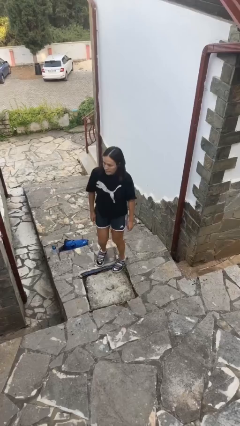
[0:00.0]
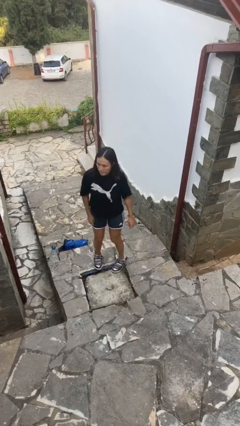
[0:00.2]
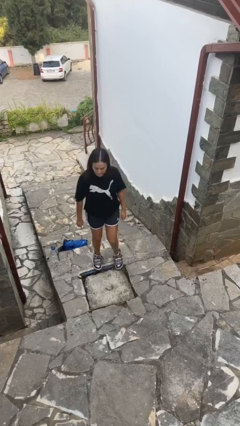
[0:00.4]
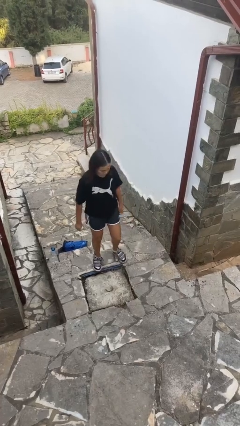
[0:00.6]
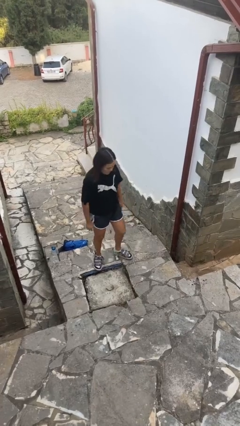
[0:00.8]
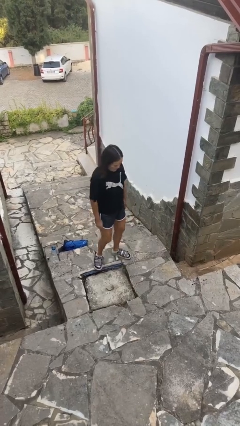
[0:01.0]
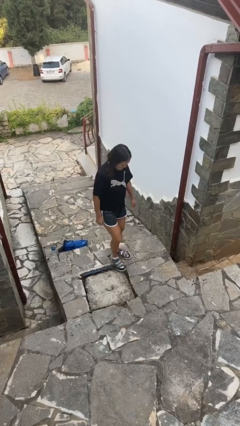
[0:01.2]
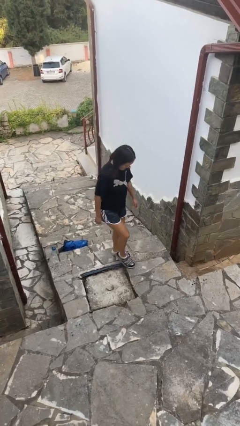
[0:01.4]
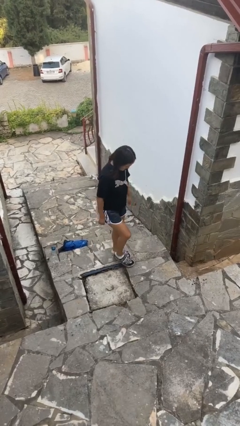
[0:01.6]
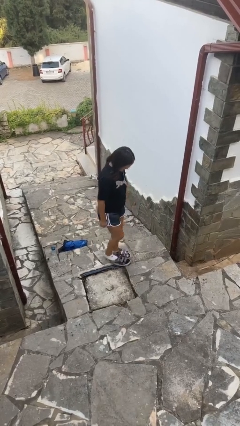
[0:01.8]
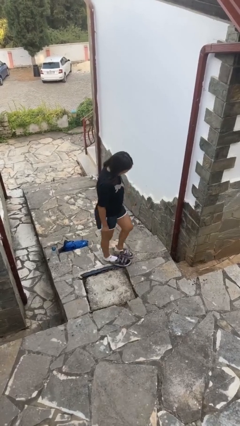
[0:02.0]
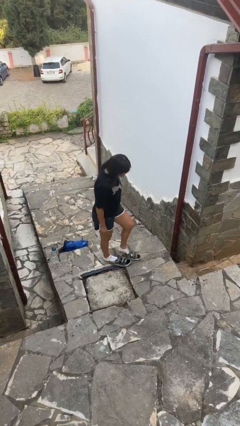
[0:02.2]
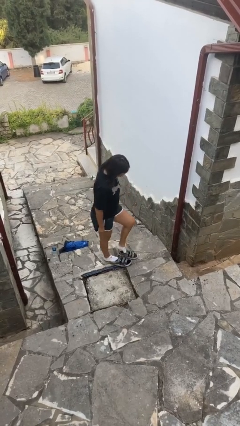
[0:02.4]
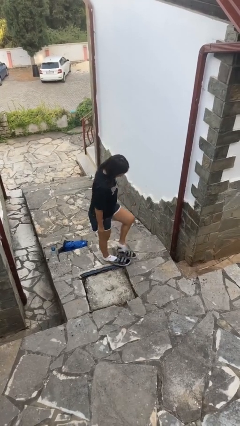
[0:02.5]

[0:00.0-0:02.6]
person takes off shoes

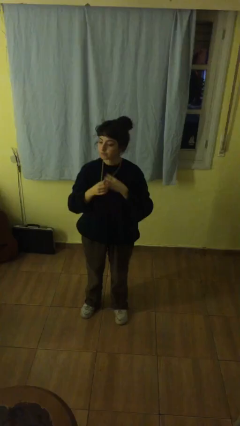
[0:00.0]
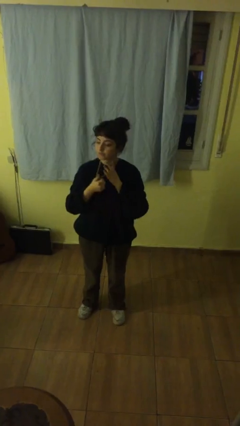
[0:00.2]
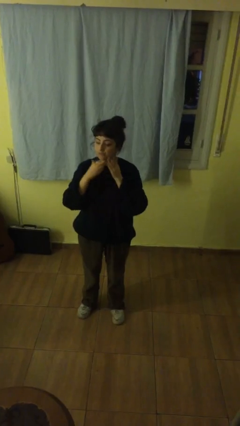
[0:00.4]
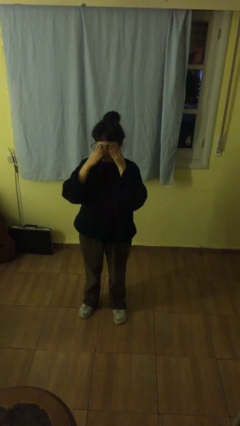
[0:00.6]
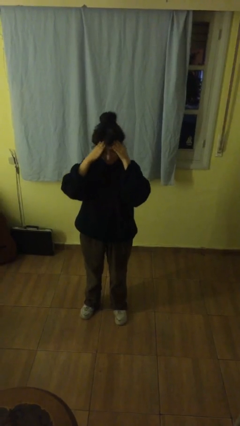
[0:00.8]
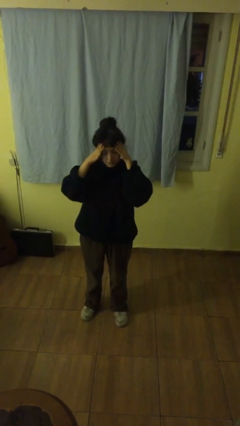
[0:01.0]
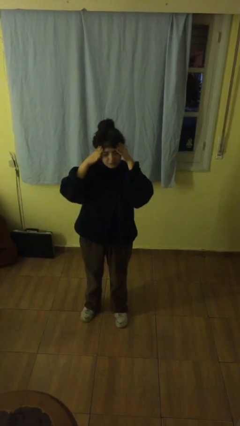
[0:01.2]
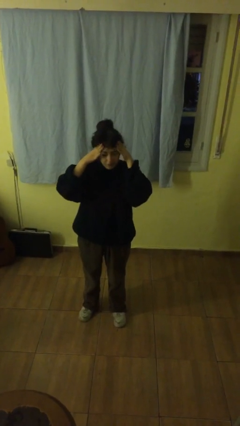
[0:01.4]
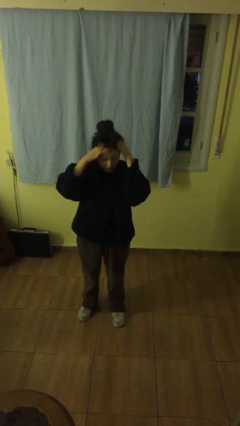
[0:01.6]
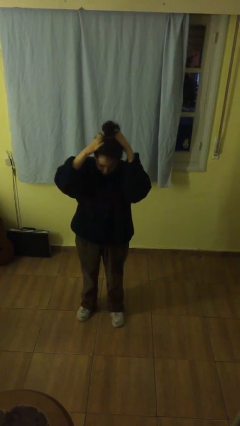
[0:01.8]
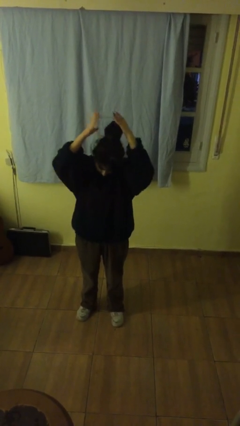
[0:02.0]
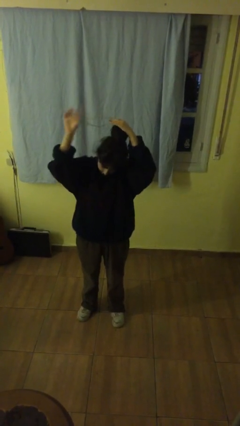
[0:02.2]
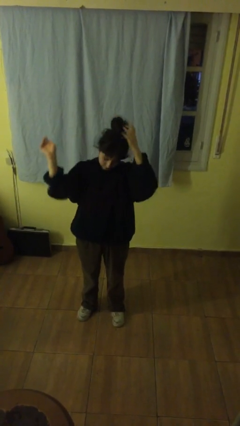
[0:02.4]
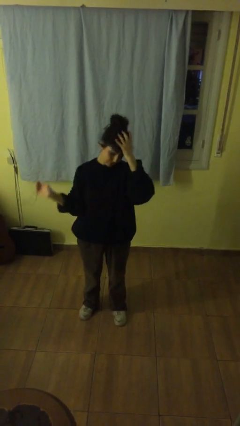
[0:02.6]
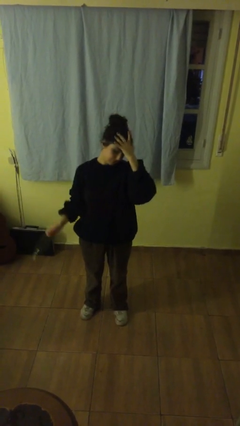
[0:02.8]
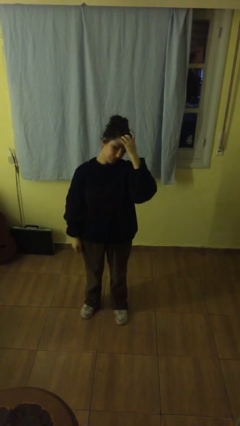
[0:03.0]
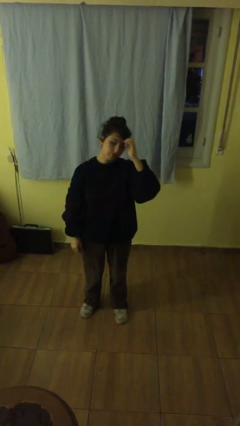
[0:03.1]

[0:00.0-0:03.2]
person takes off necklace

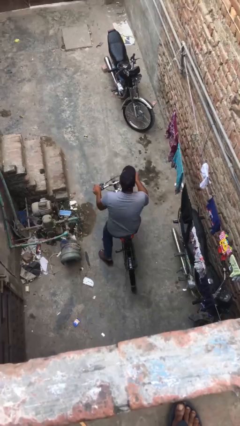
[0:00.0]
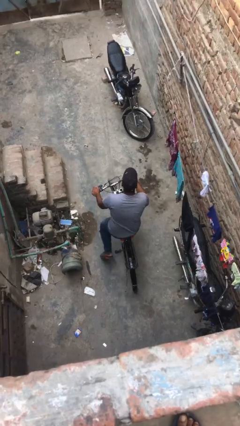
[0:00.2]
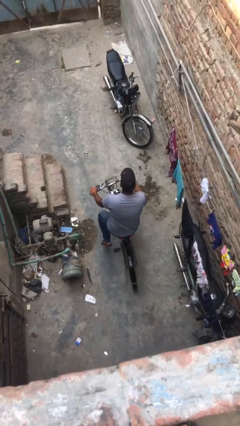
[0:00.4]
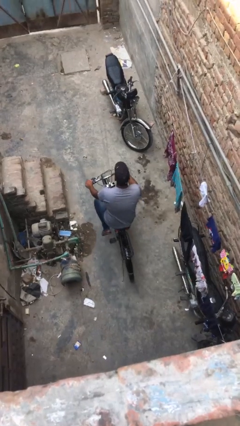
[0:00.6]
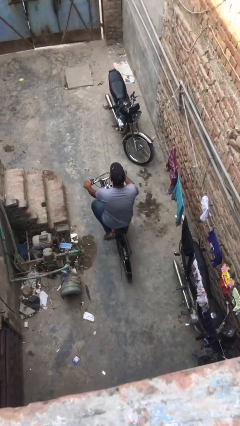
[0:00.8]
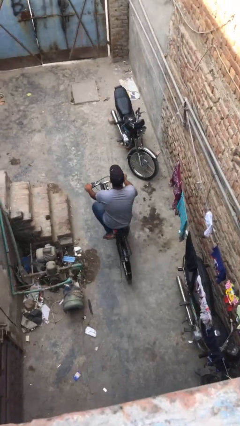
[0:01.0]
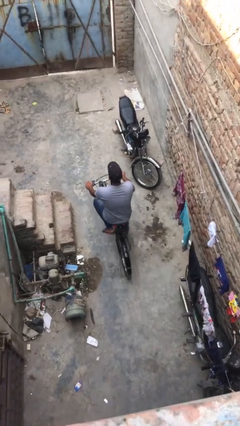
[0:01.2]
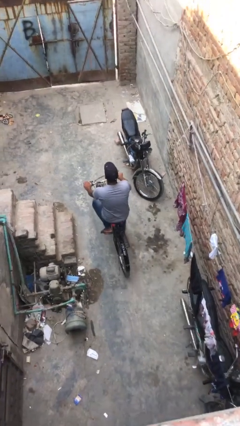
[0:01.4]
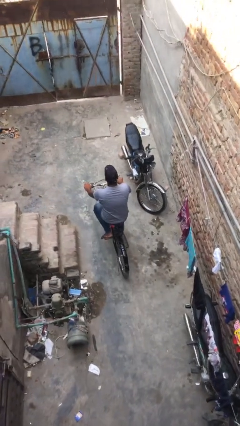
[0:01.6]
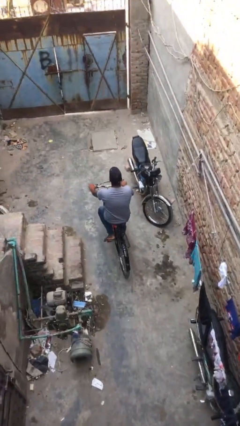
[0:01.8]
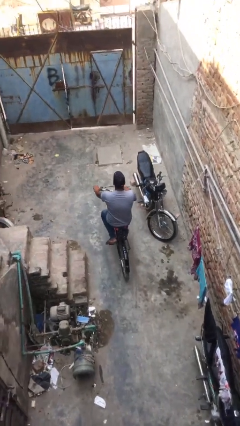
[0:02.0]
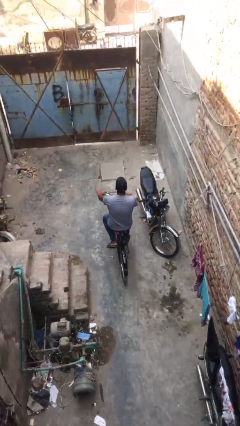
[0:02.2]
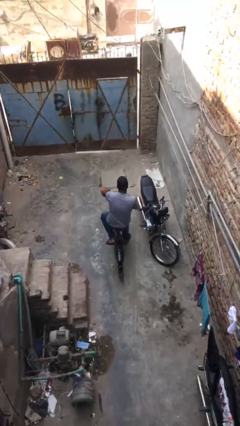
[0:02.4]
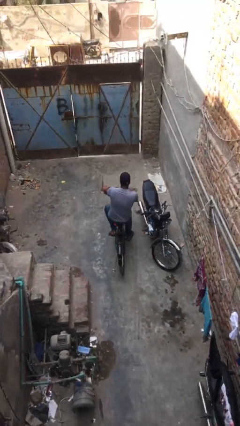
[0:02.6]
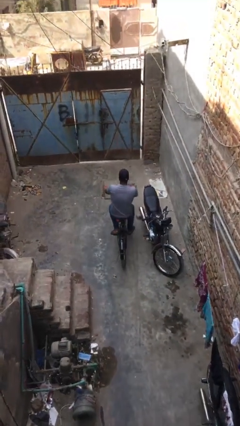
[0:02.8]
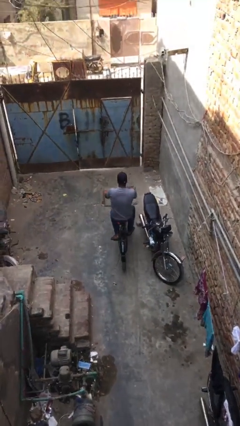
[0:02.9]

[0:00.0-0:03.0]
person rides bicycle

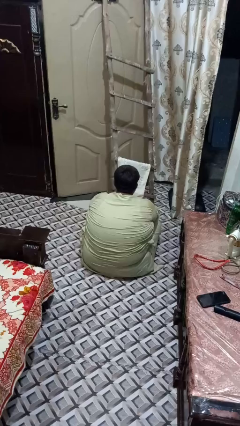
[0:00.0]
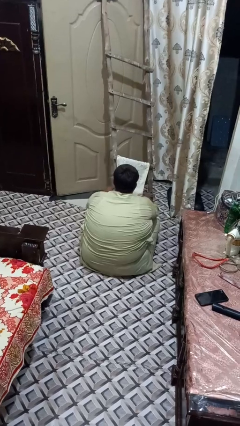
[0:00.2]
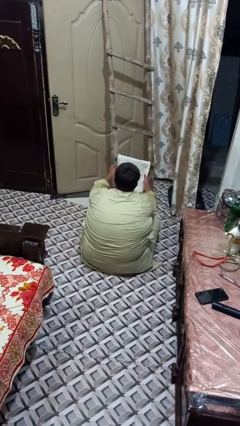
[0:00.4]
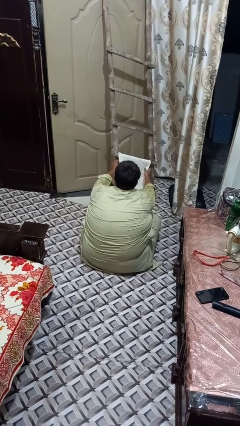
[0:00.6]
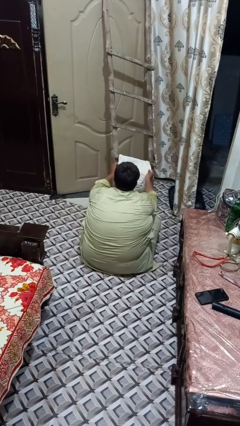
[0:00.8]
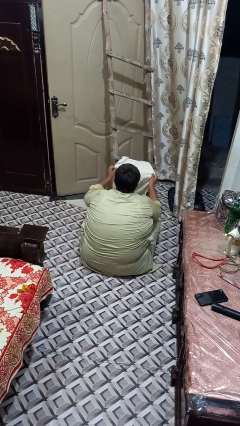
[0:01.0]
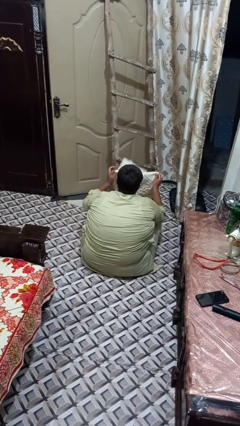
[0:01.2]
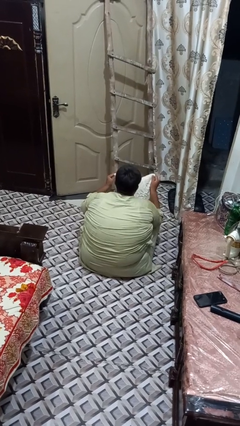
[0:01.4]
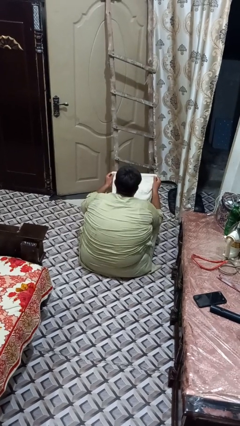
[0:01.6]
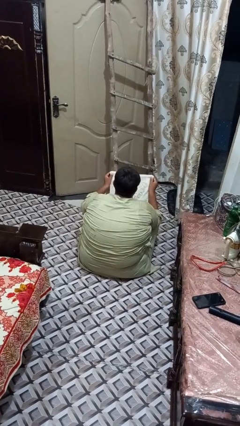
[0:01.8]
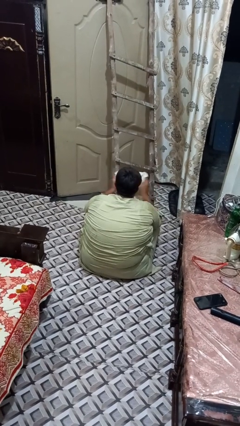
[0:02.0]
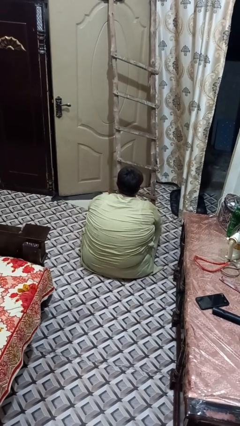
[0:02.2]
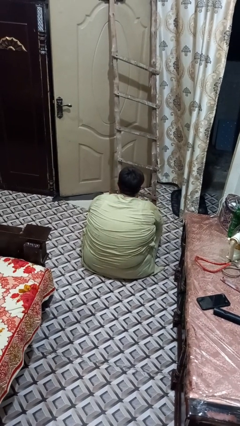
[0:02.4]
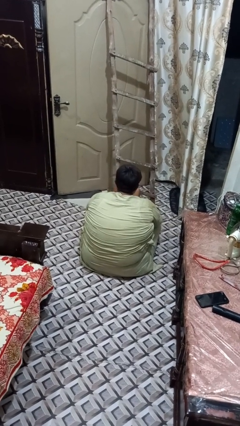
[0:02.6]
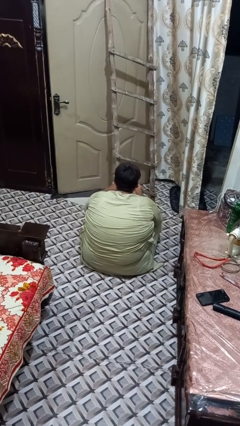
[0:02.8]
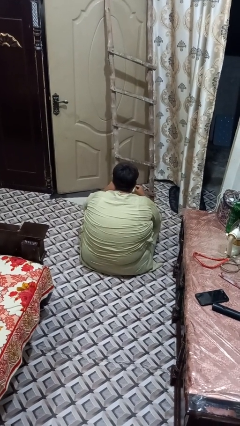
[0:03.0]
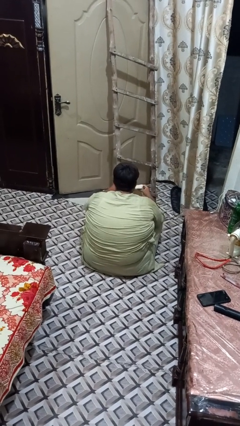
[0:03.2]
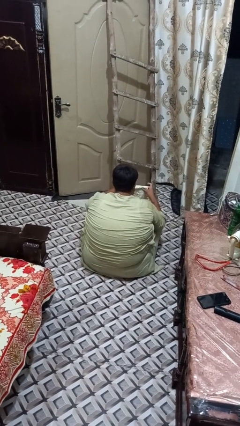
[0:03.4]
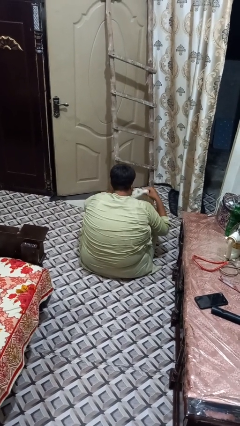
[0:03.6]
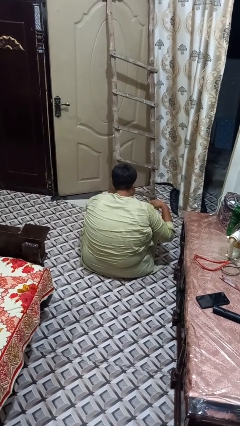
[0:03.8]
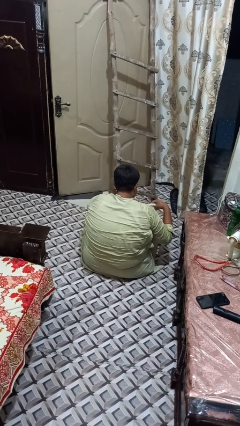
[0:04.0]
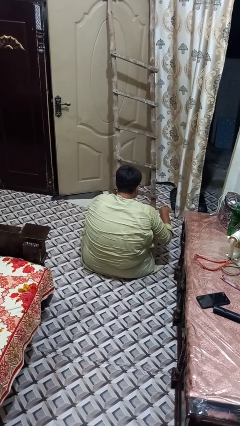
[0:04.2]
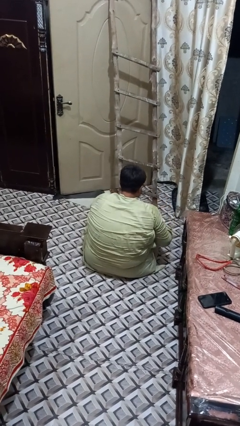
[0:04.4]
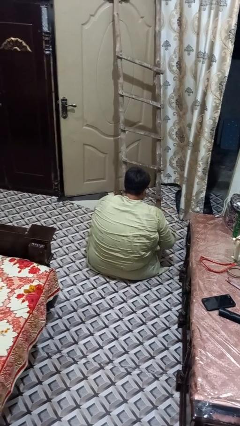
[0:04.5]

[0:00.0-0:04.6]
person folds towel

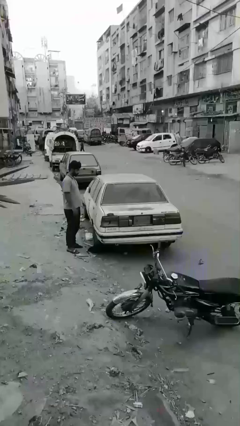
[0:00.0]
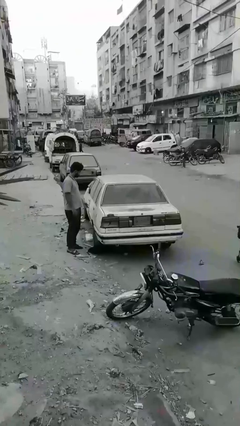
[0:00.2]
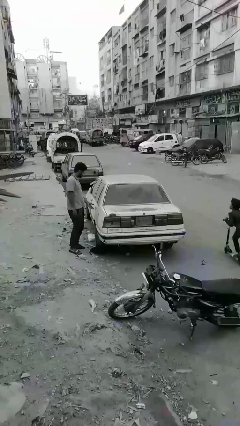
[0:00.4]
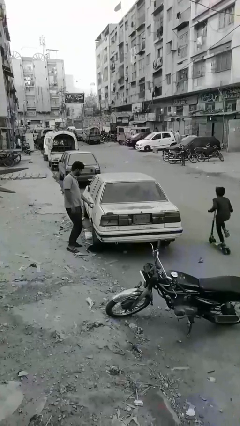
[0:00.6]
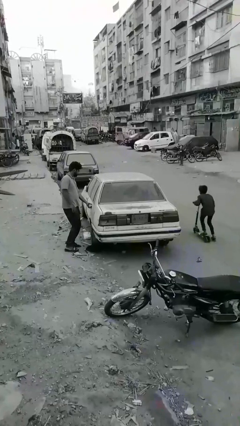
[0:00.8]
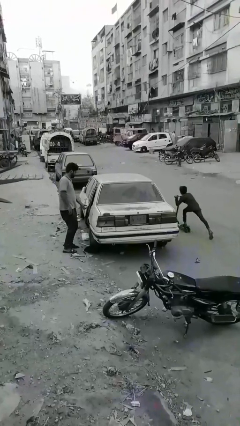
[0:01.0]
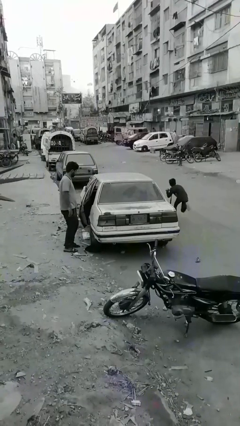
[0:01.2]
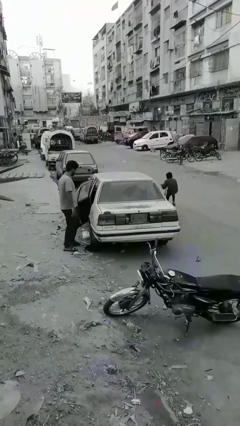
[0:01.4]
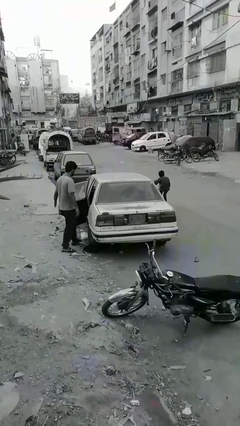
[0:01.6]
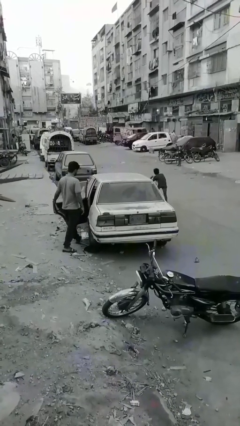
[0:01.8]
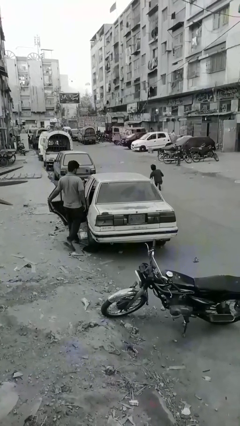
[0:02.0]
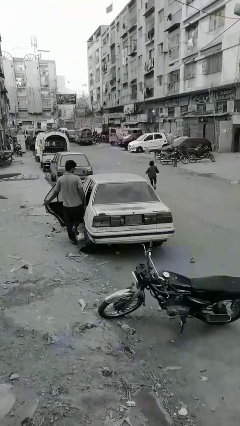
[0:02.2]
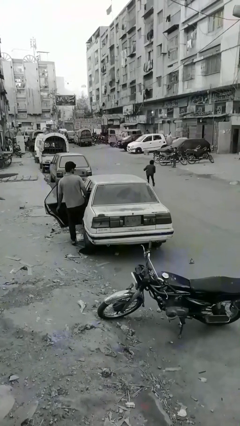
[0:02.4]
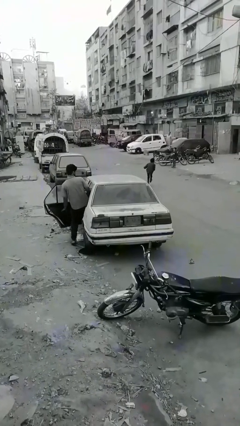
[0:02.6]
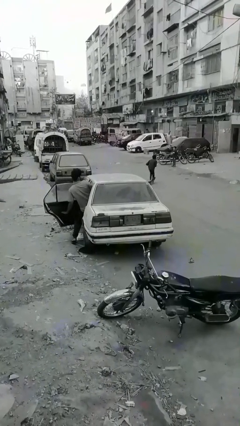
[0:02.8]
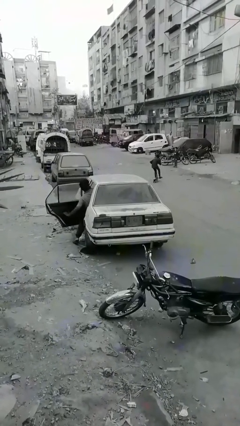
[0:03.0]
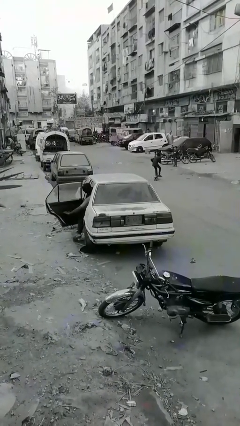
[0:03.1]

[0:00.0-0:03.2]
car picks up person

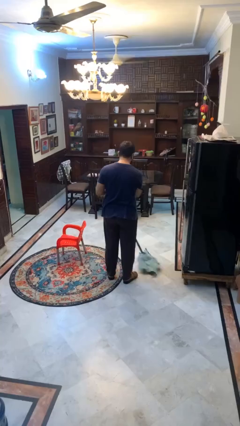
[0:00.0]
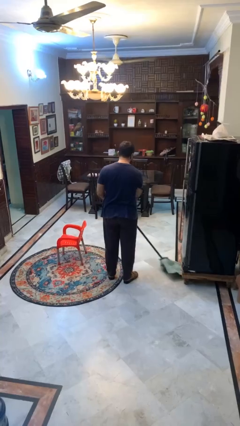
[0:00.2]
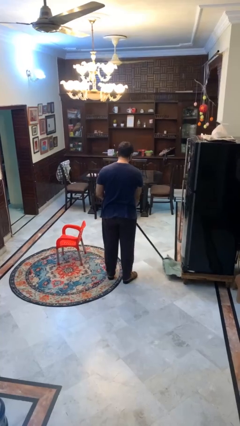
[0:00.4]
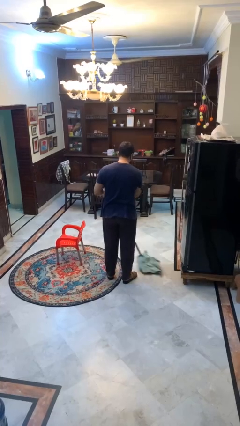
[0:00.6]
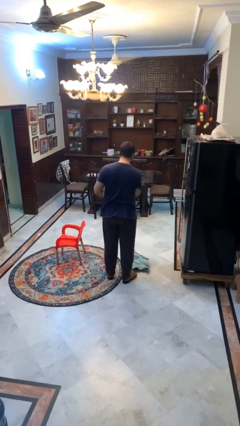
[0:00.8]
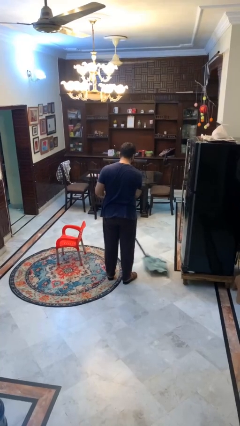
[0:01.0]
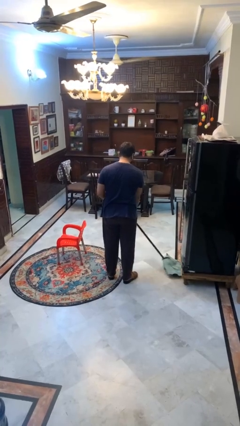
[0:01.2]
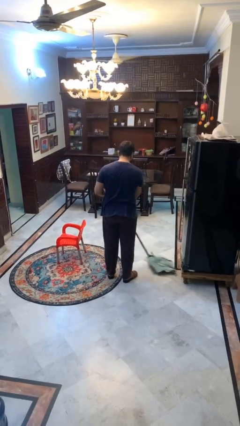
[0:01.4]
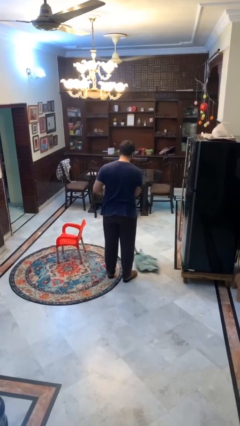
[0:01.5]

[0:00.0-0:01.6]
person mops
